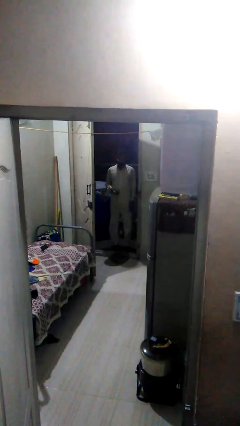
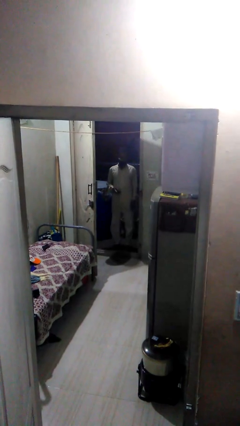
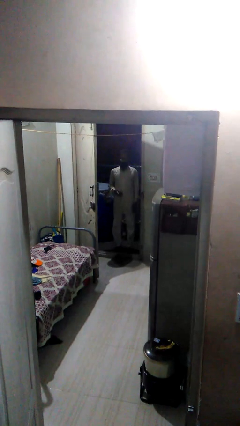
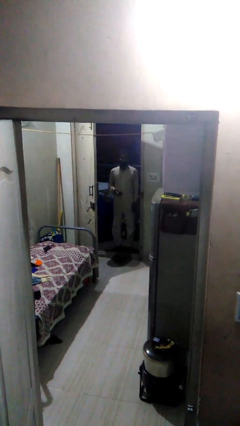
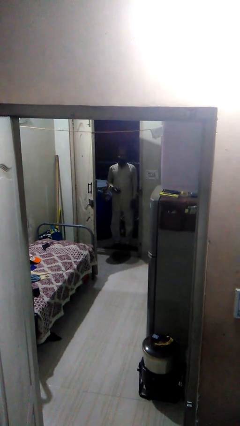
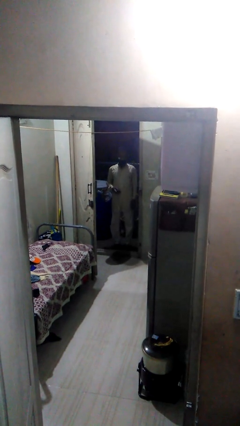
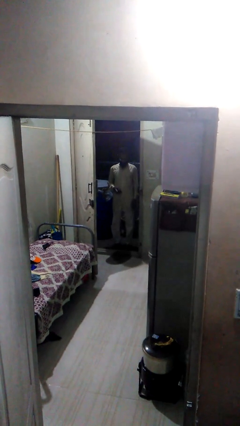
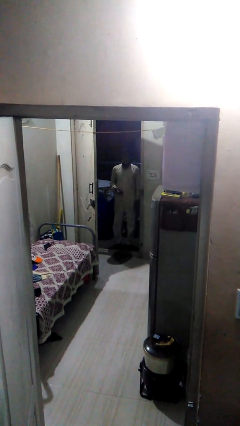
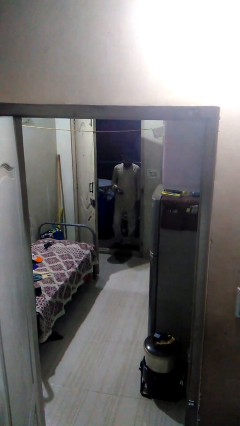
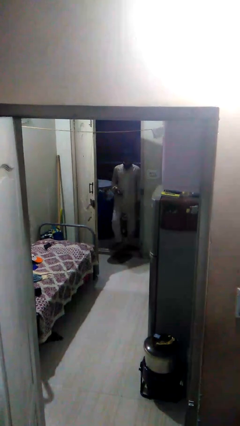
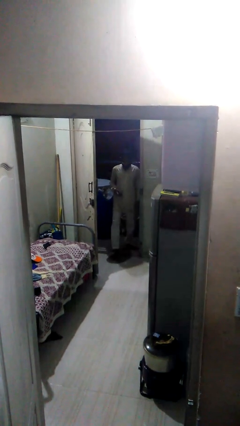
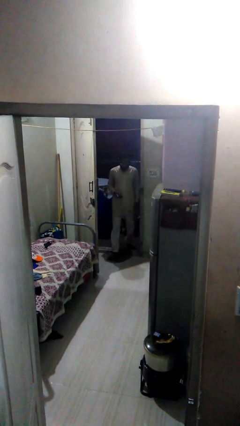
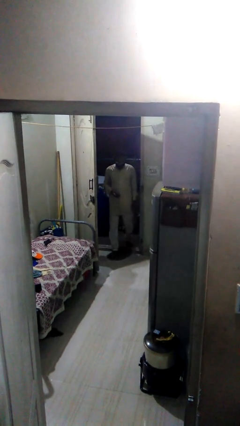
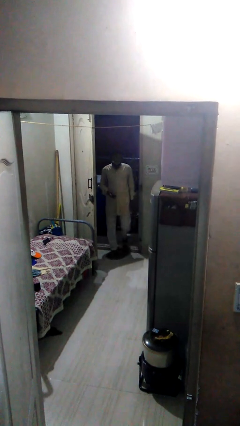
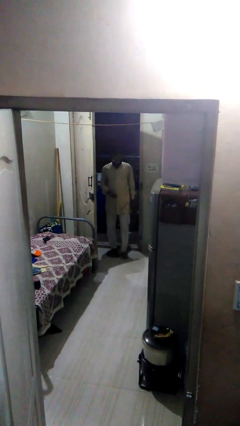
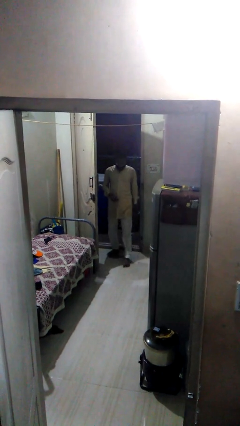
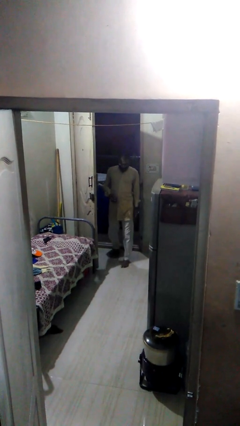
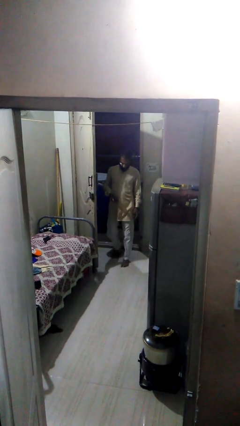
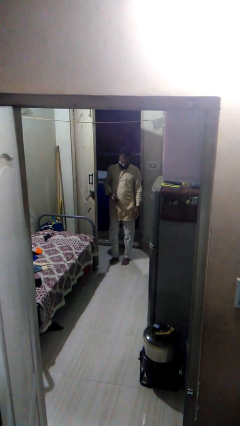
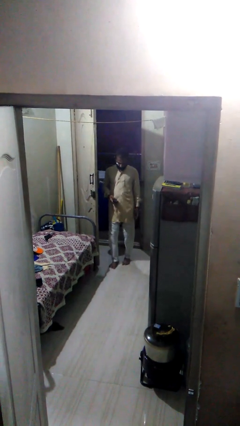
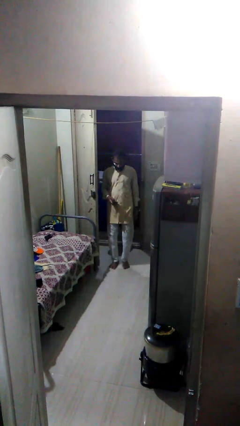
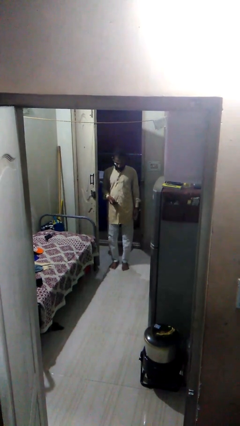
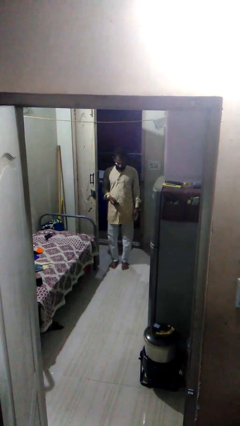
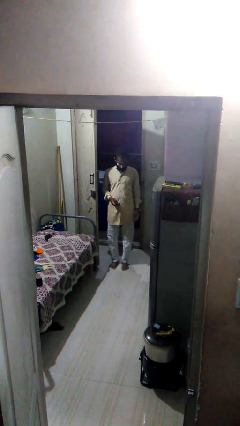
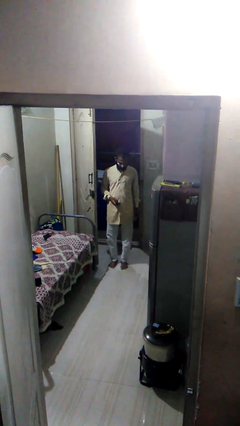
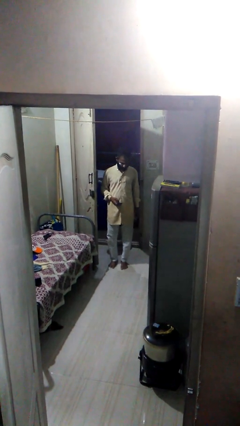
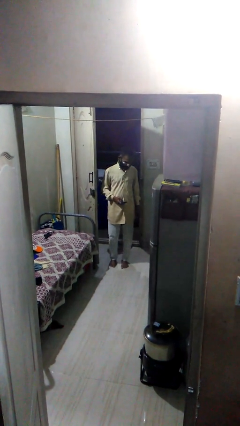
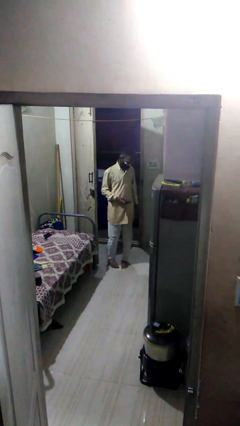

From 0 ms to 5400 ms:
person enters scene through structure

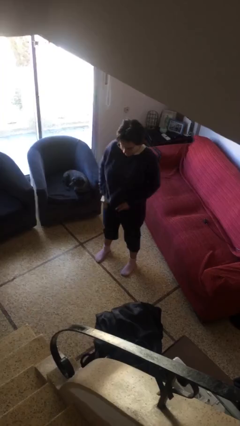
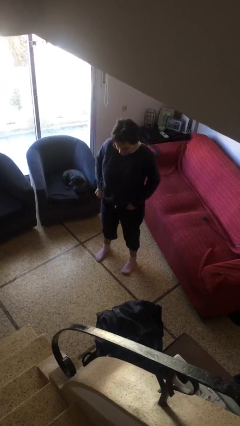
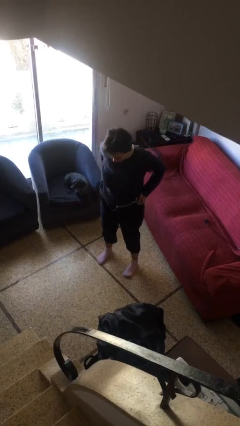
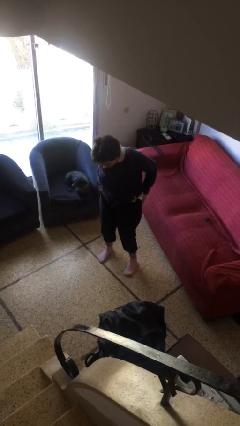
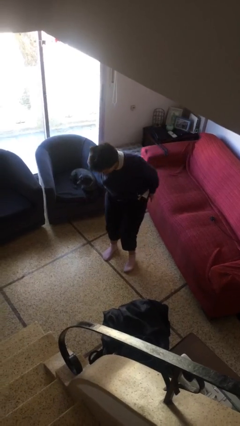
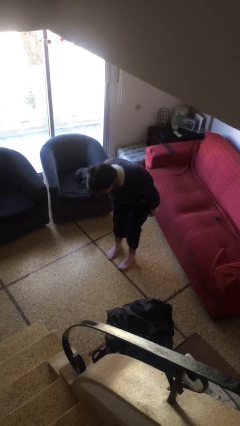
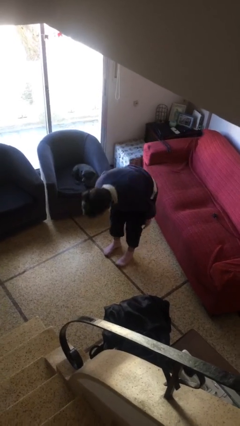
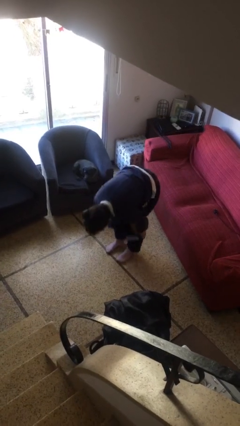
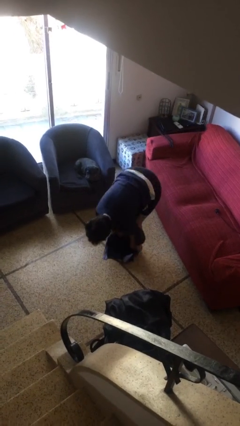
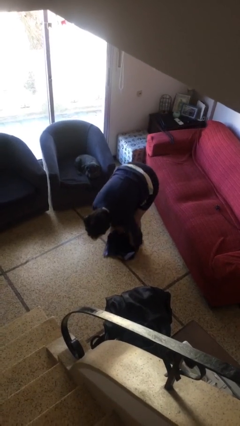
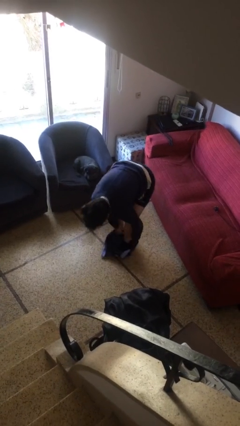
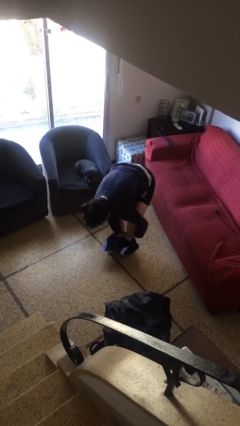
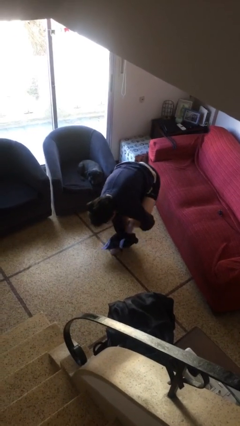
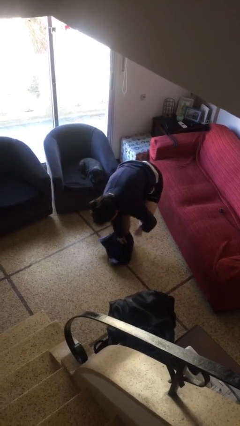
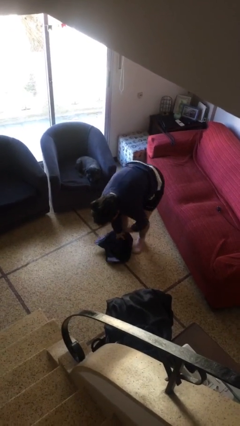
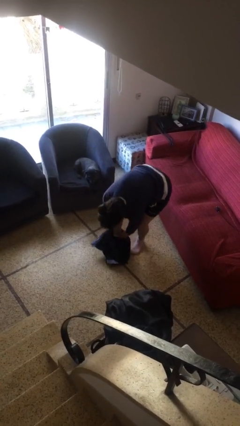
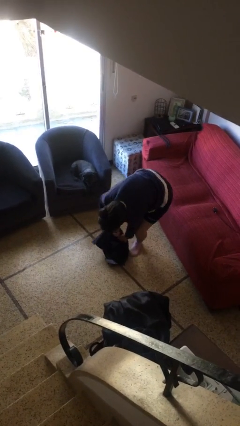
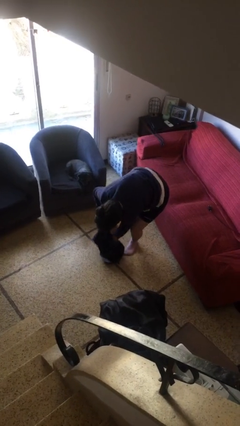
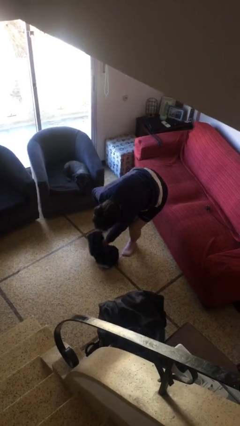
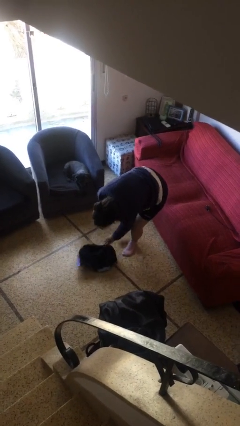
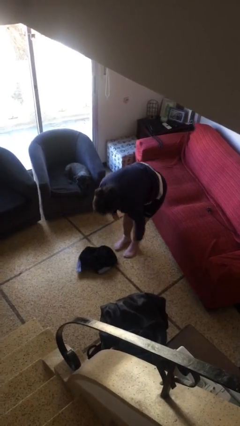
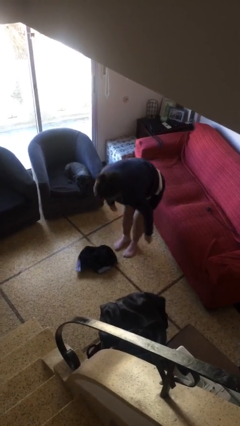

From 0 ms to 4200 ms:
person takes off pants

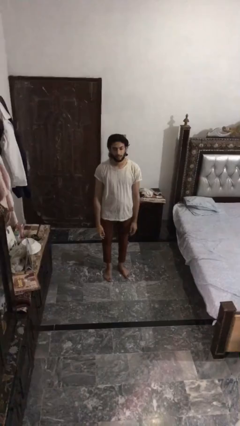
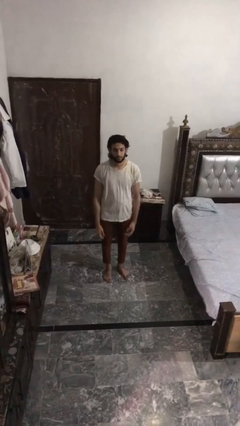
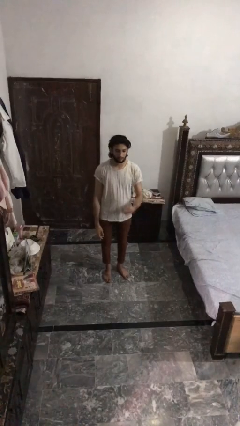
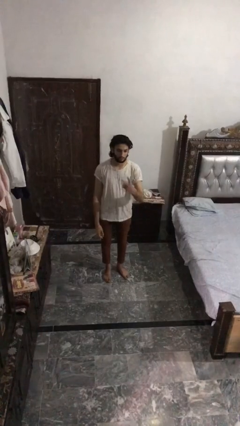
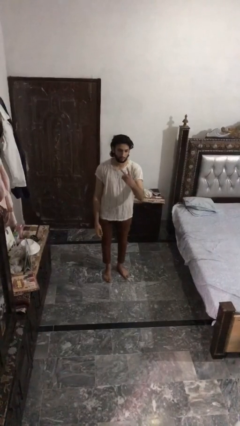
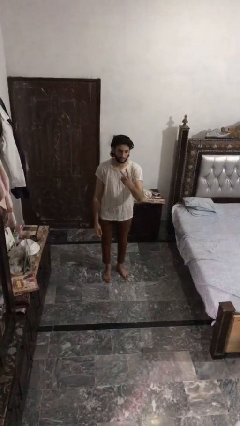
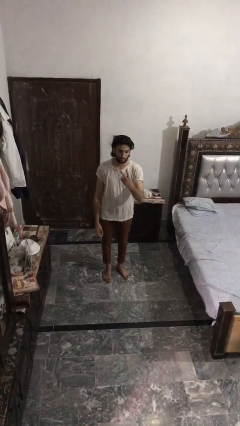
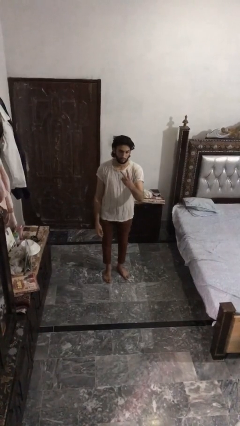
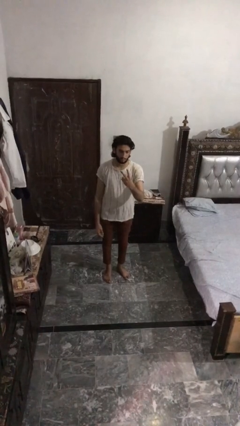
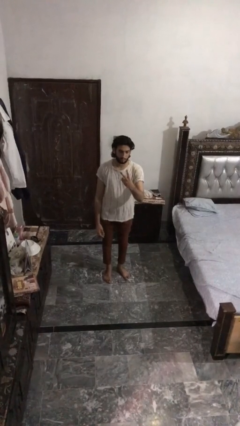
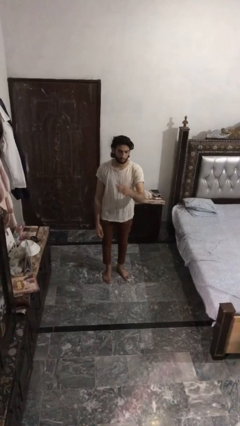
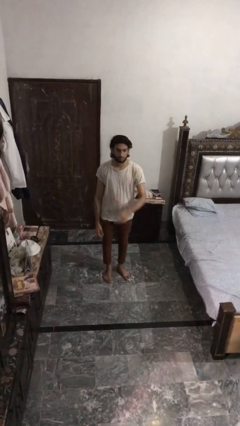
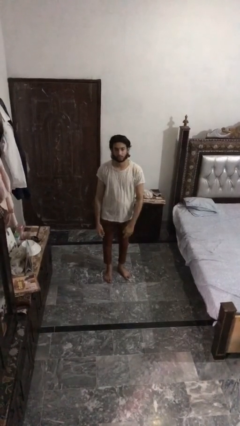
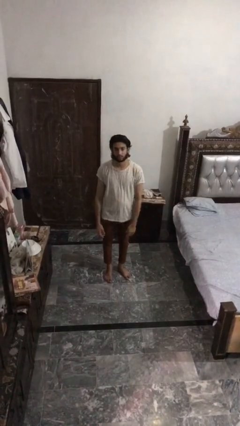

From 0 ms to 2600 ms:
person gestures peace

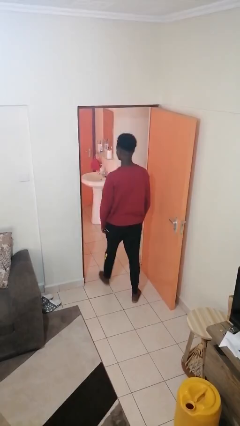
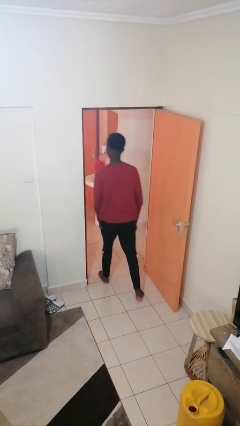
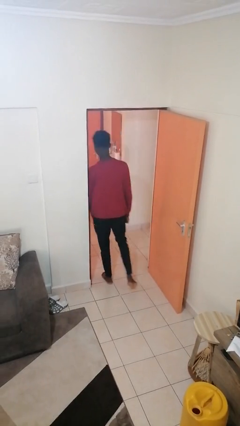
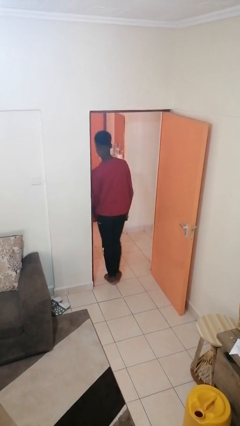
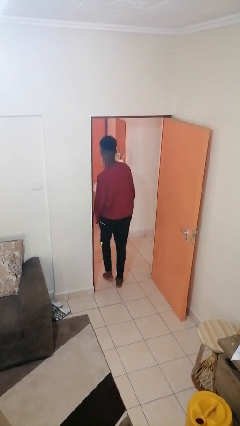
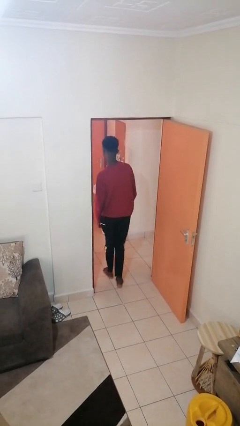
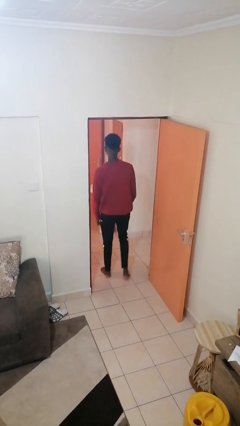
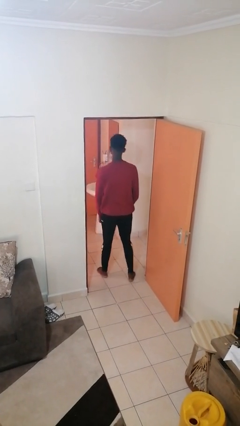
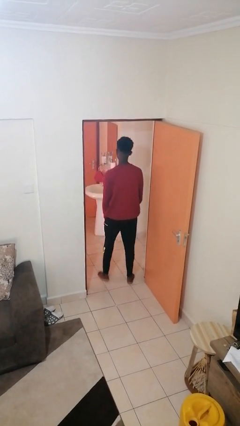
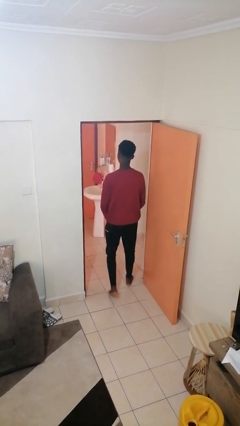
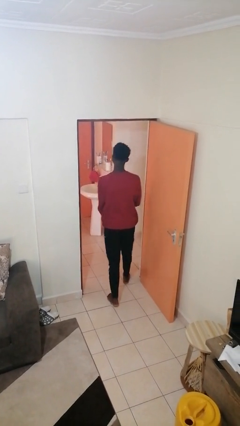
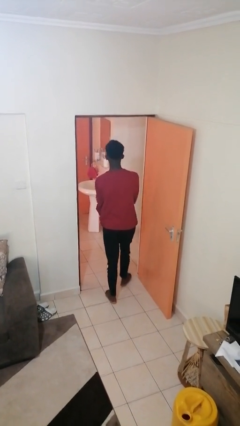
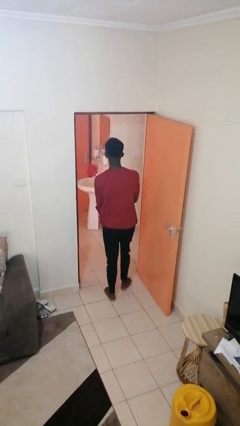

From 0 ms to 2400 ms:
person bumps into wall

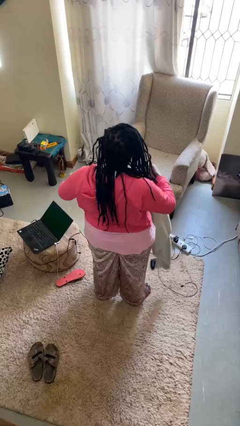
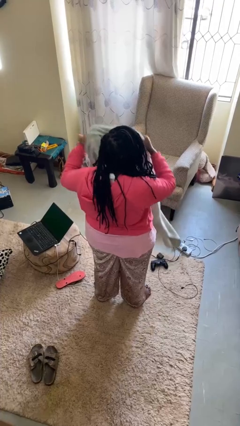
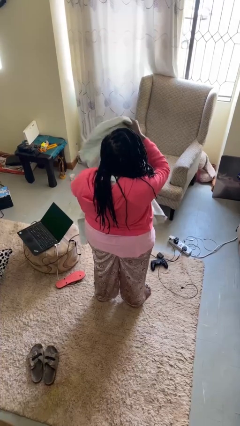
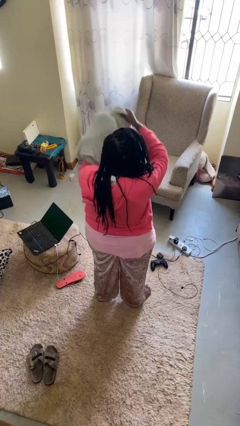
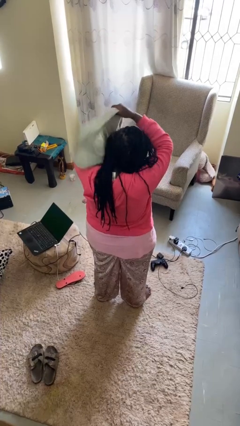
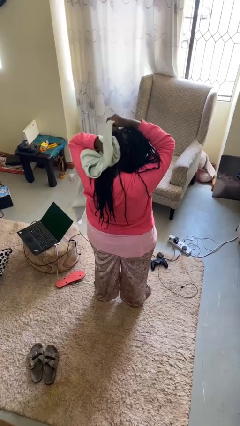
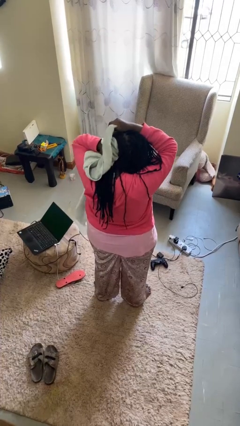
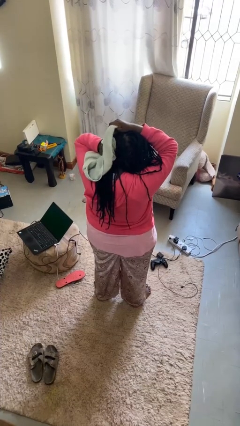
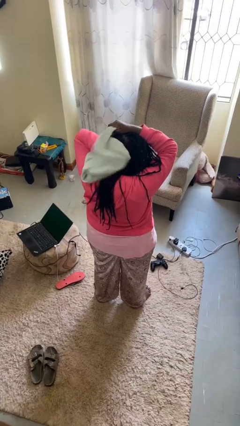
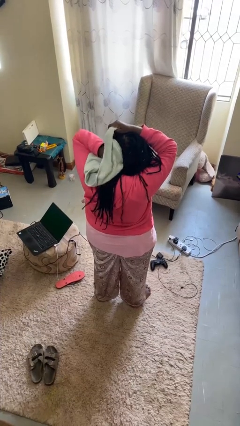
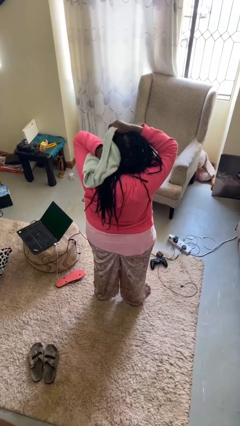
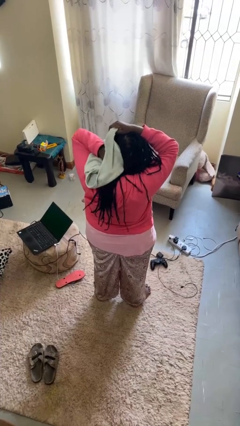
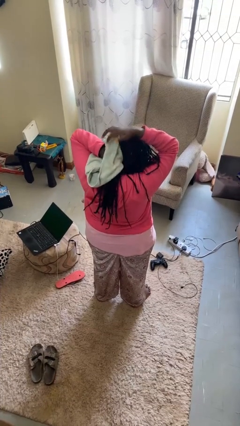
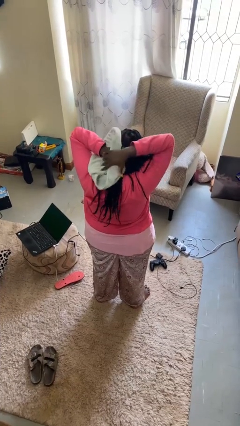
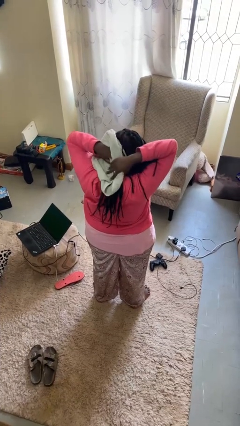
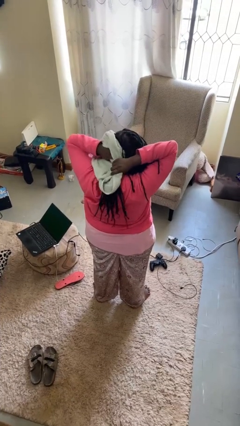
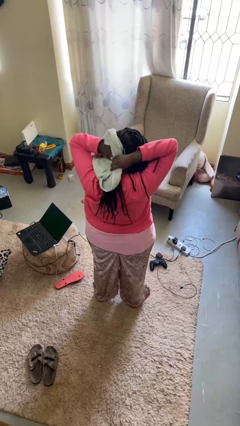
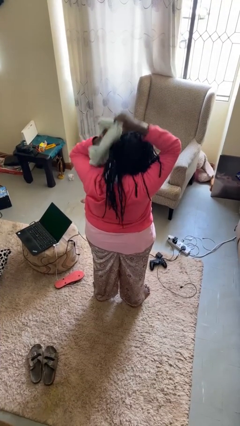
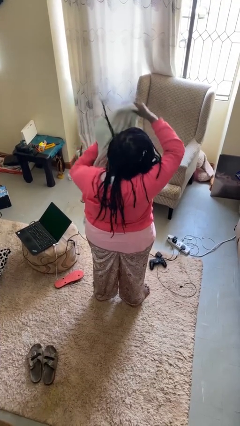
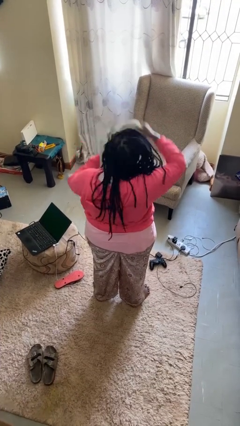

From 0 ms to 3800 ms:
person dries hair with towel
